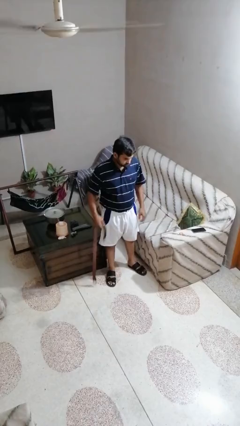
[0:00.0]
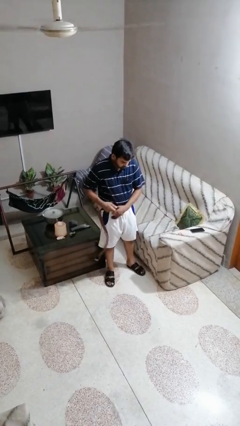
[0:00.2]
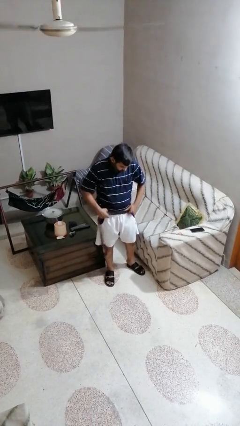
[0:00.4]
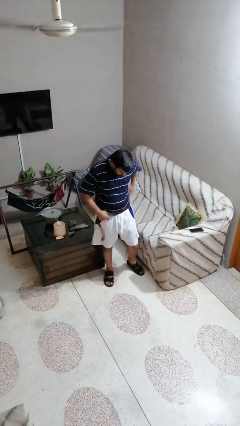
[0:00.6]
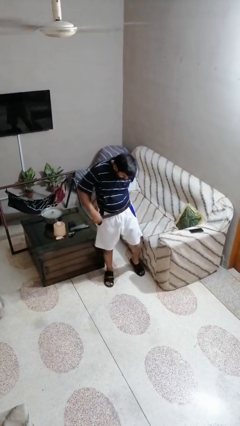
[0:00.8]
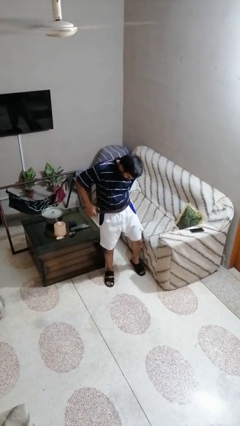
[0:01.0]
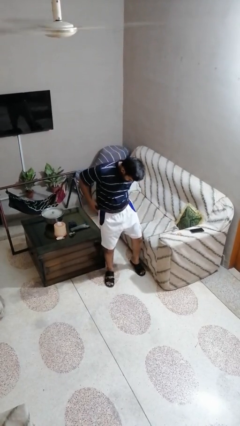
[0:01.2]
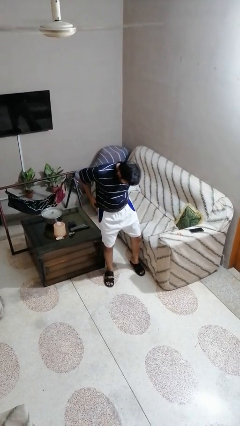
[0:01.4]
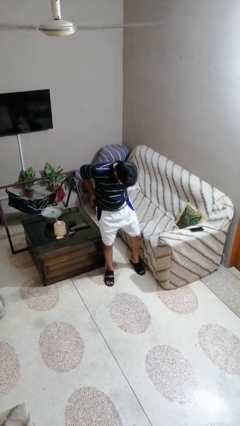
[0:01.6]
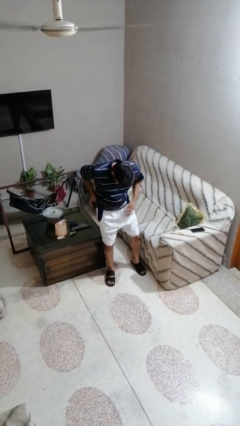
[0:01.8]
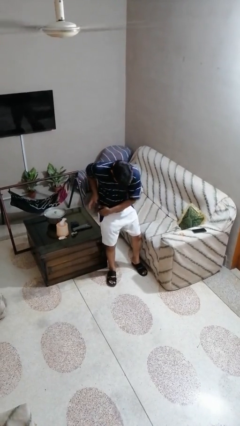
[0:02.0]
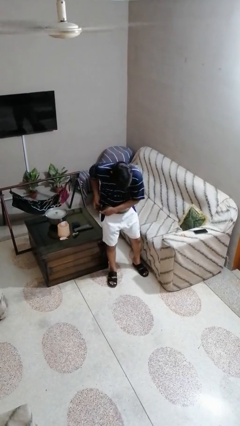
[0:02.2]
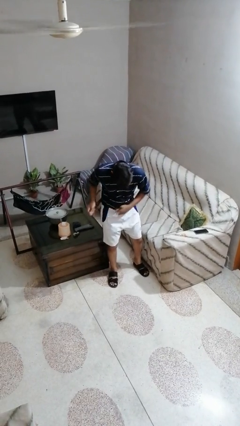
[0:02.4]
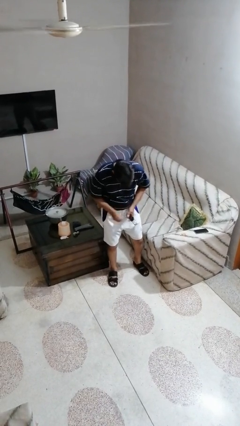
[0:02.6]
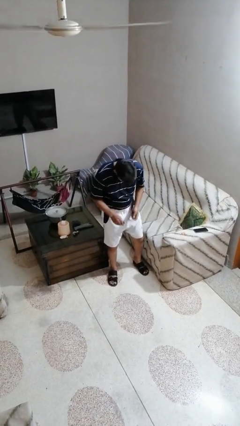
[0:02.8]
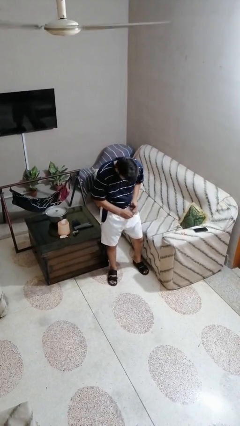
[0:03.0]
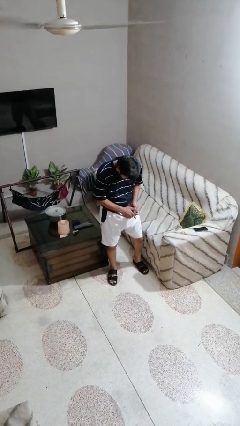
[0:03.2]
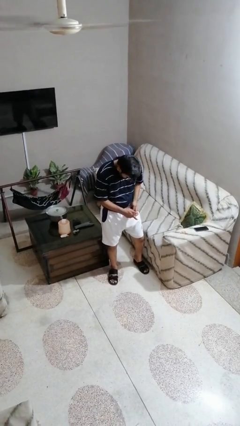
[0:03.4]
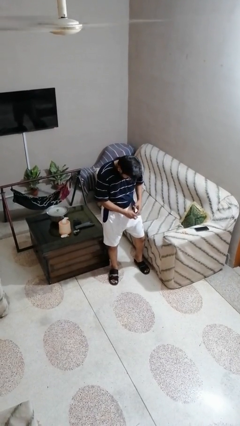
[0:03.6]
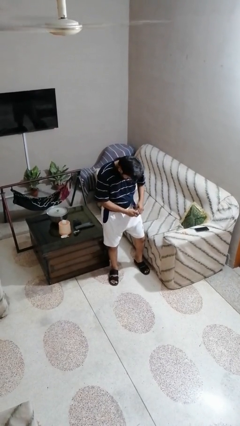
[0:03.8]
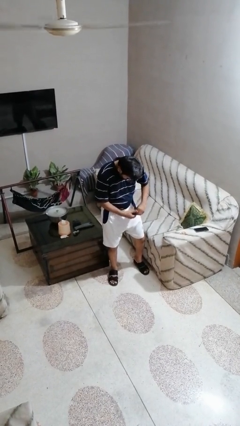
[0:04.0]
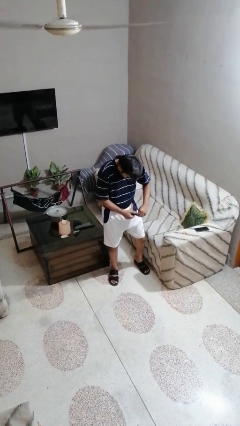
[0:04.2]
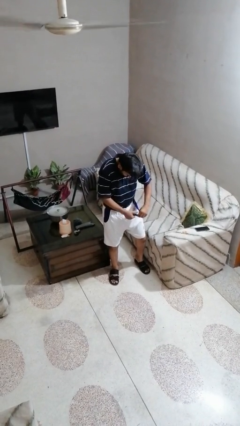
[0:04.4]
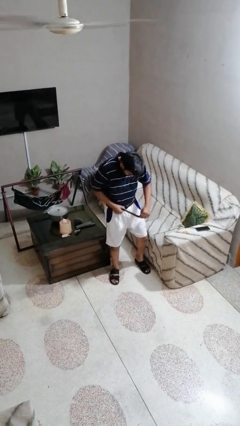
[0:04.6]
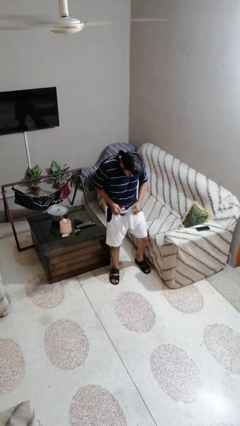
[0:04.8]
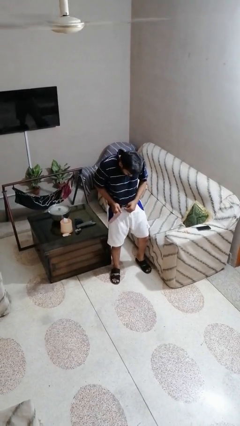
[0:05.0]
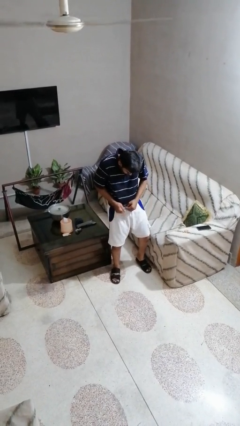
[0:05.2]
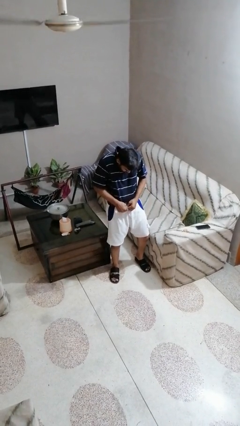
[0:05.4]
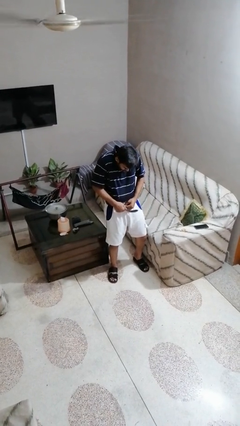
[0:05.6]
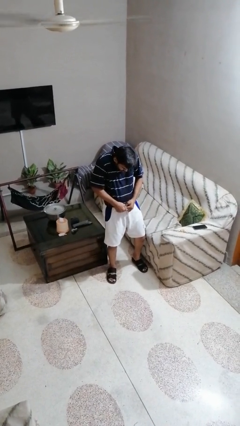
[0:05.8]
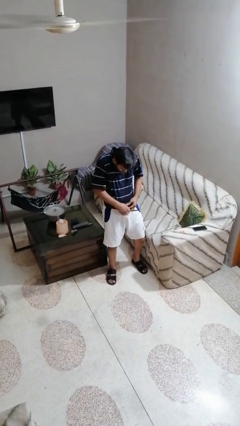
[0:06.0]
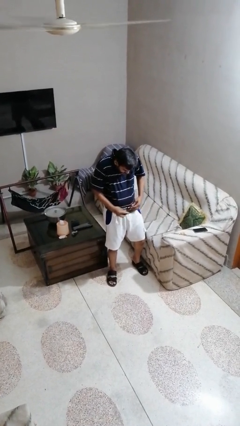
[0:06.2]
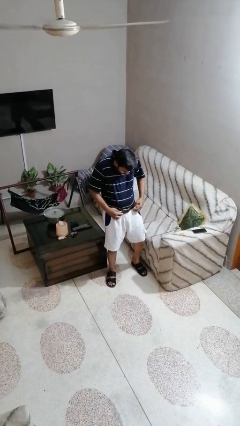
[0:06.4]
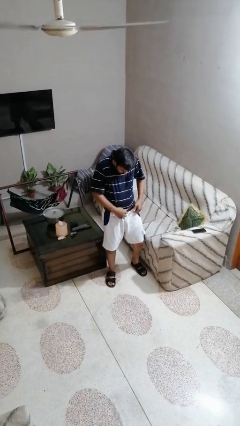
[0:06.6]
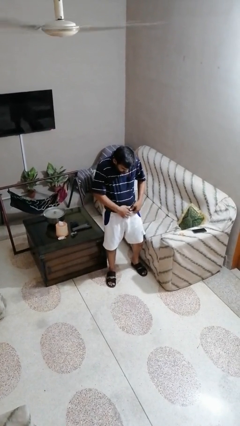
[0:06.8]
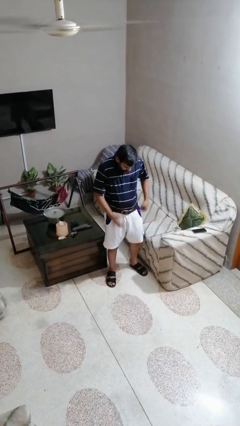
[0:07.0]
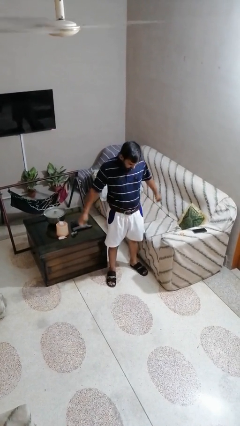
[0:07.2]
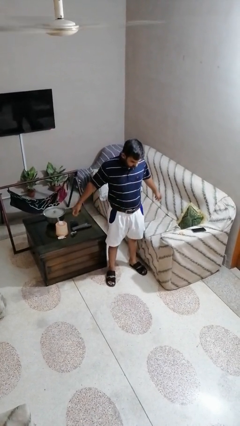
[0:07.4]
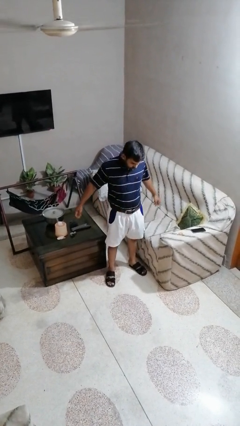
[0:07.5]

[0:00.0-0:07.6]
person puts on belt

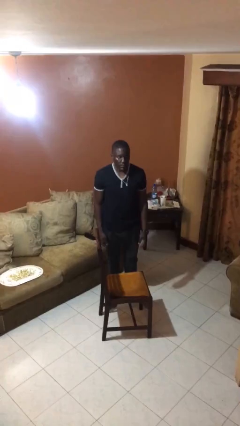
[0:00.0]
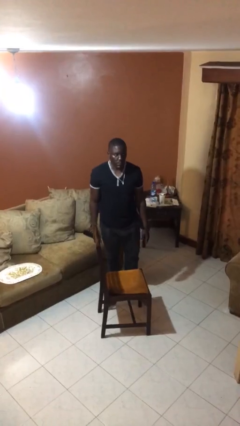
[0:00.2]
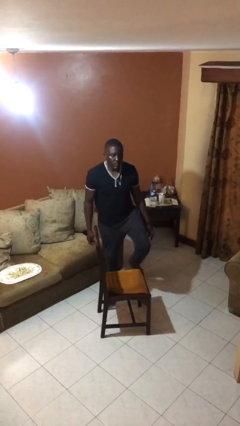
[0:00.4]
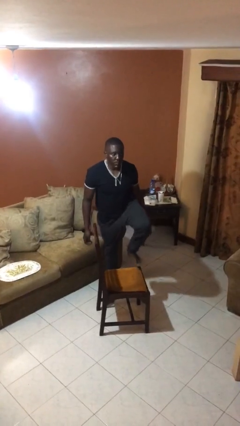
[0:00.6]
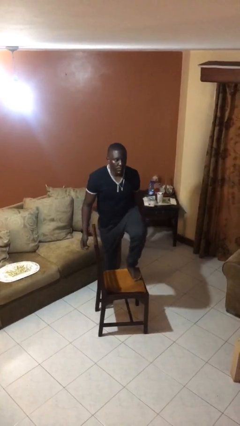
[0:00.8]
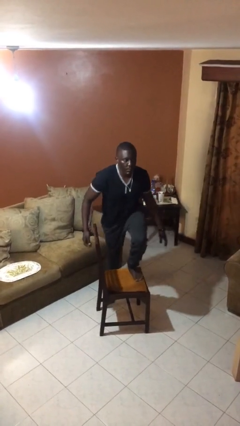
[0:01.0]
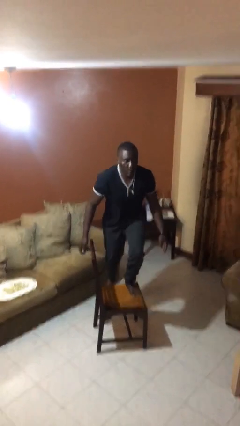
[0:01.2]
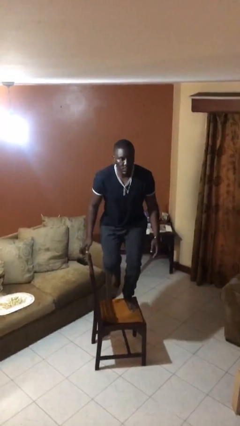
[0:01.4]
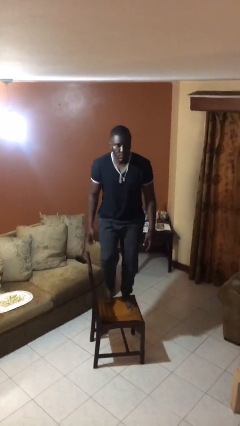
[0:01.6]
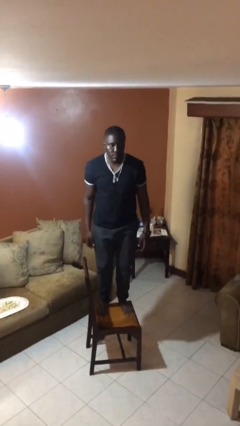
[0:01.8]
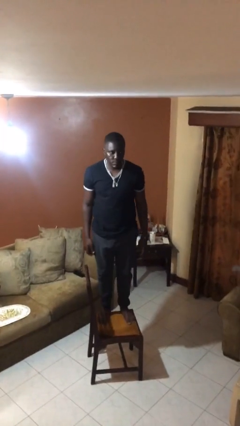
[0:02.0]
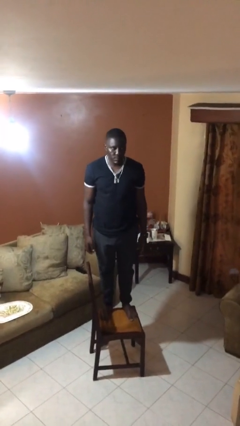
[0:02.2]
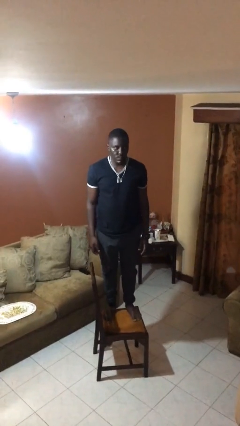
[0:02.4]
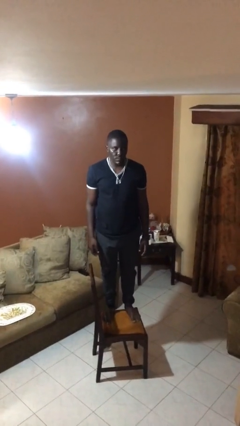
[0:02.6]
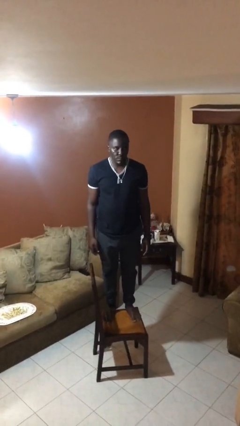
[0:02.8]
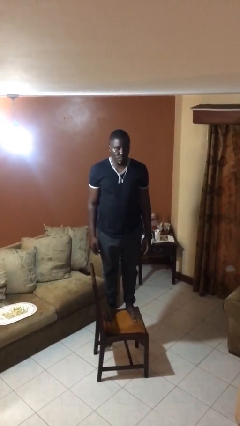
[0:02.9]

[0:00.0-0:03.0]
person climbs on chair

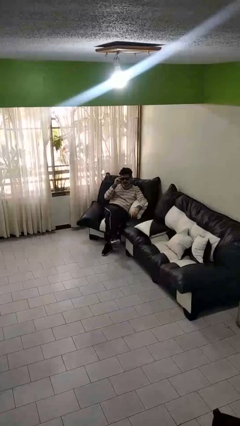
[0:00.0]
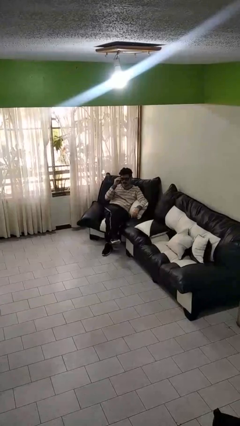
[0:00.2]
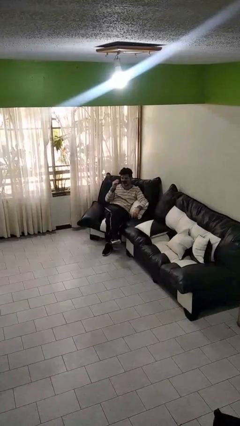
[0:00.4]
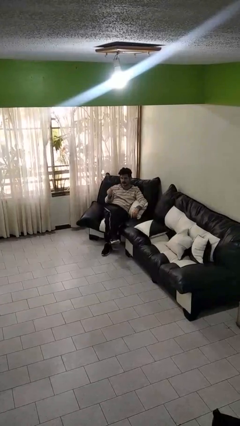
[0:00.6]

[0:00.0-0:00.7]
person takes off sunglasses

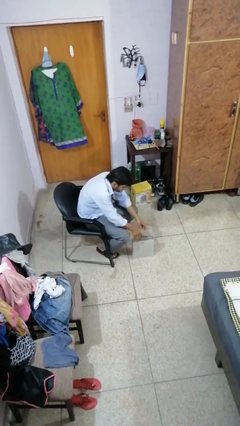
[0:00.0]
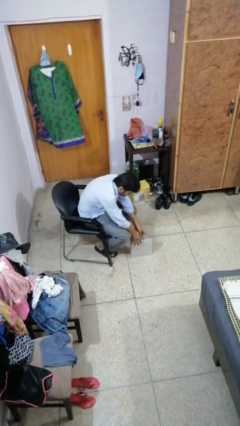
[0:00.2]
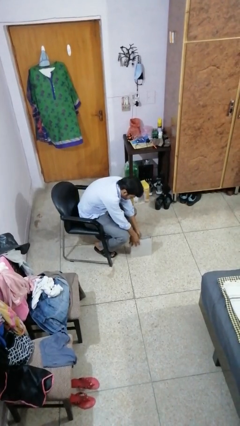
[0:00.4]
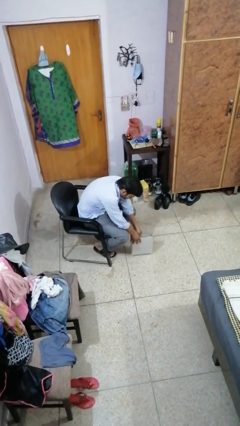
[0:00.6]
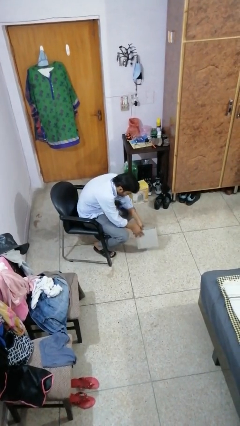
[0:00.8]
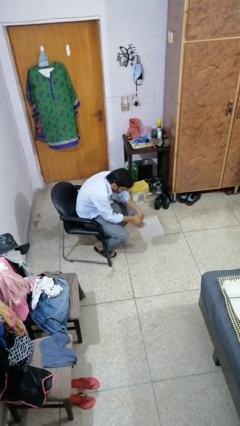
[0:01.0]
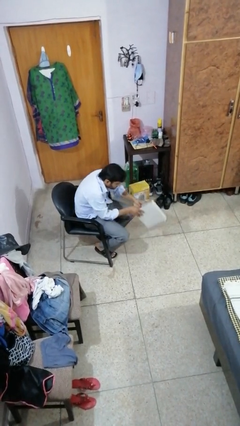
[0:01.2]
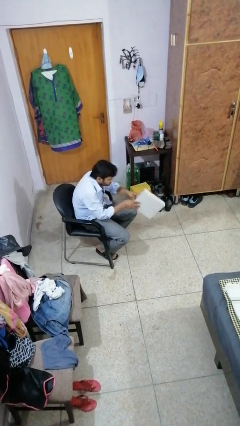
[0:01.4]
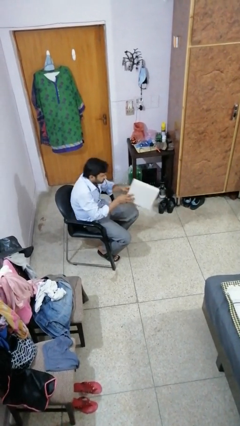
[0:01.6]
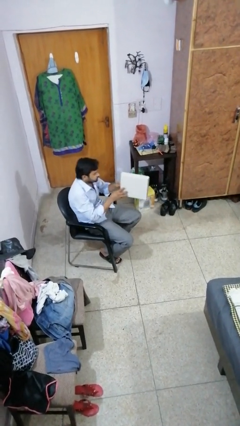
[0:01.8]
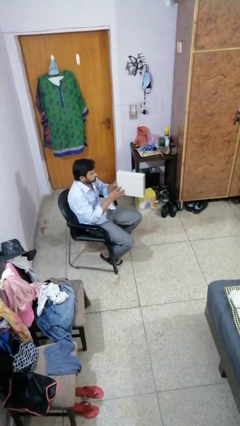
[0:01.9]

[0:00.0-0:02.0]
person picks up object from floor

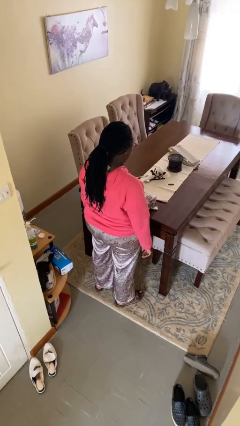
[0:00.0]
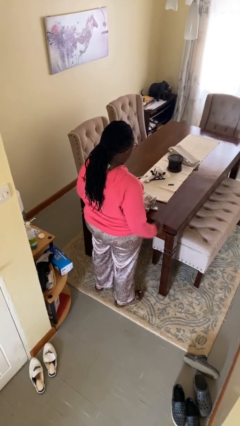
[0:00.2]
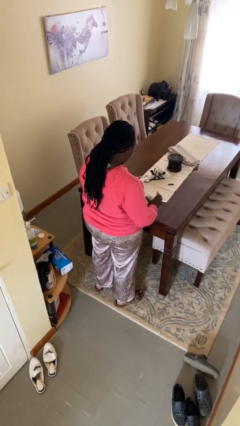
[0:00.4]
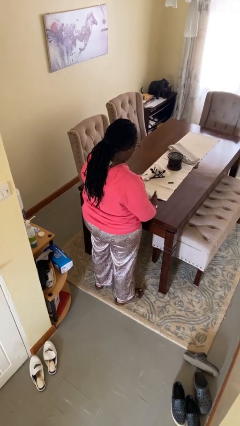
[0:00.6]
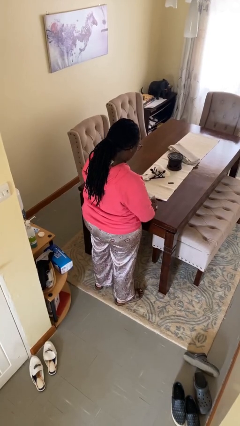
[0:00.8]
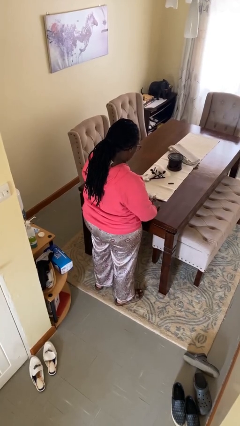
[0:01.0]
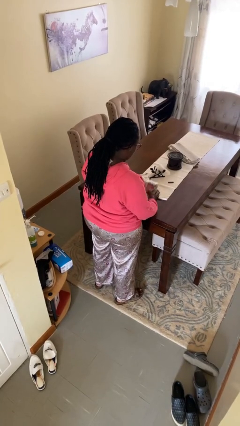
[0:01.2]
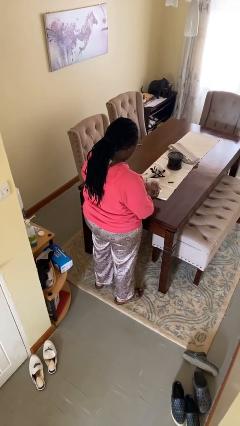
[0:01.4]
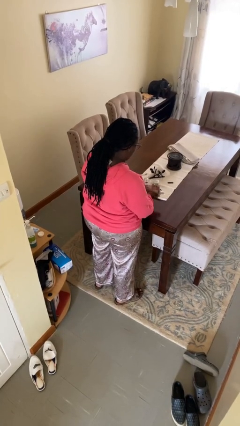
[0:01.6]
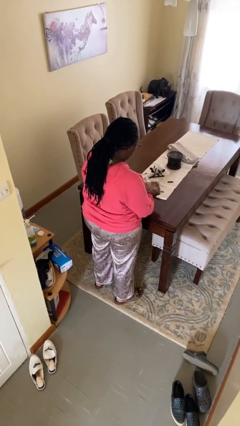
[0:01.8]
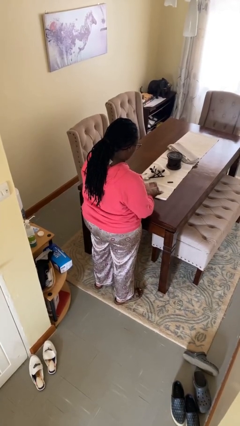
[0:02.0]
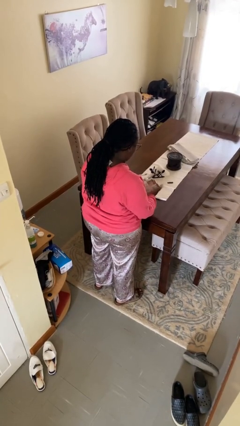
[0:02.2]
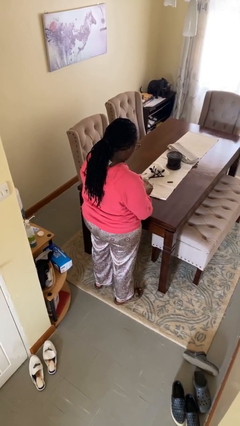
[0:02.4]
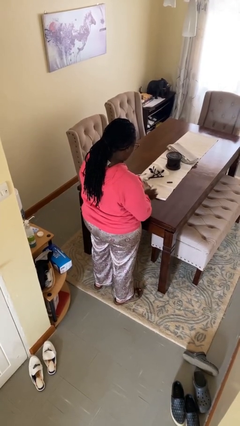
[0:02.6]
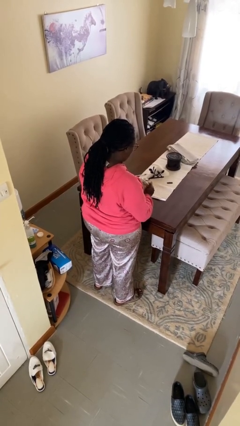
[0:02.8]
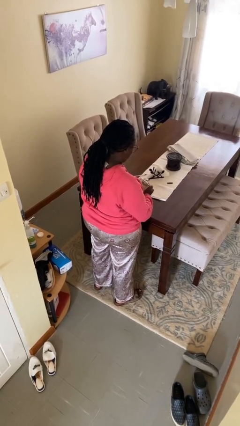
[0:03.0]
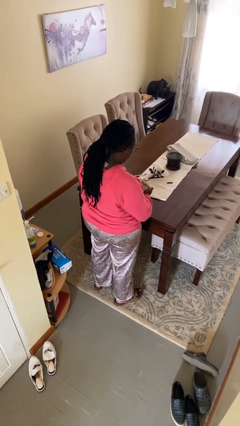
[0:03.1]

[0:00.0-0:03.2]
person wraps box

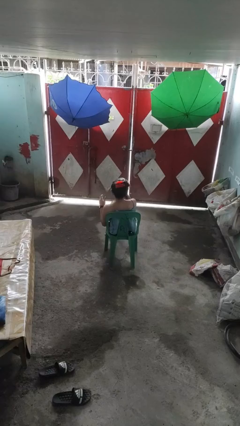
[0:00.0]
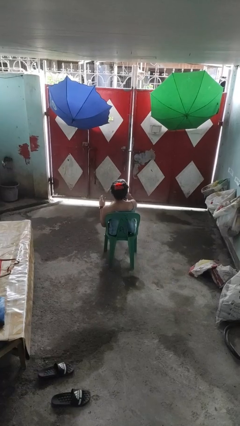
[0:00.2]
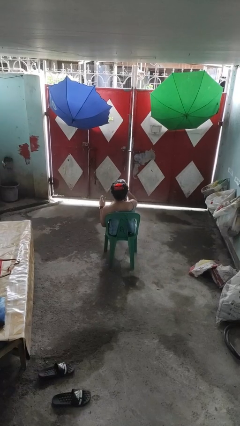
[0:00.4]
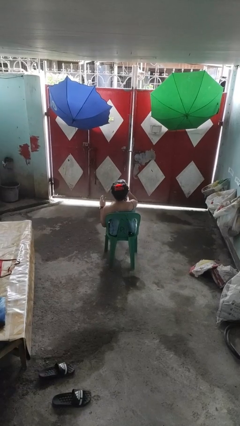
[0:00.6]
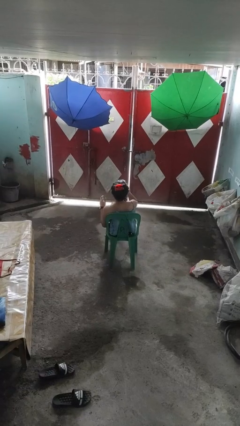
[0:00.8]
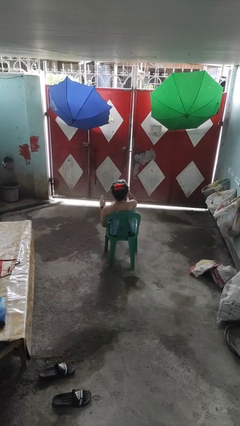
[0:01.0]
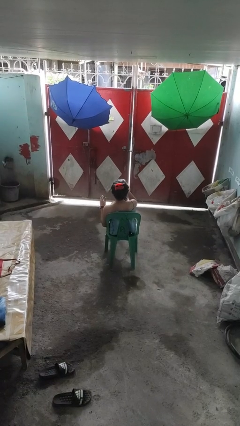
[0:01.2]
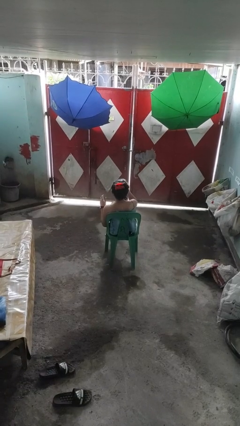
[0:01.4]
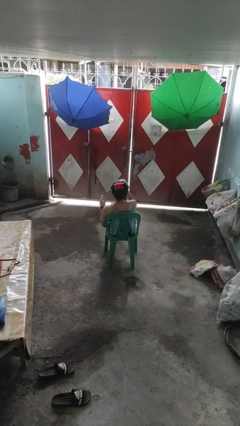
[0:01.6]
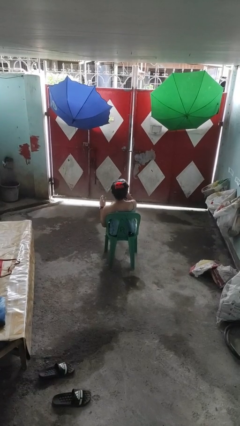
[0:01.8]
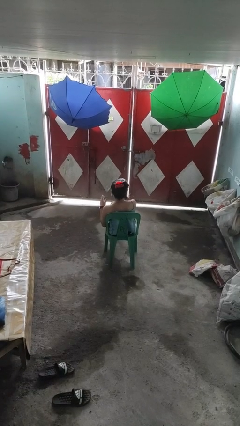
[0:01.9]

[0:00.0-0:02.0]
person drinks from beverage can
